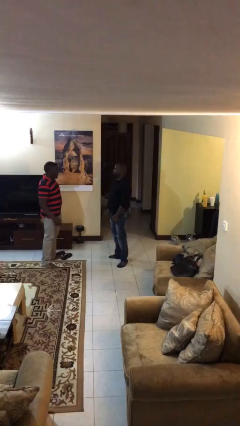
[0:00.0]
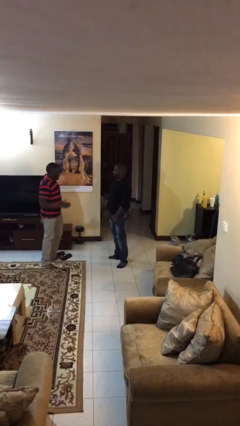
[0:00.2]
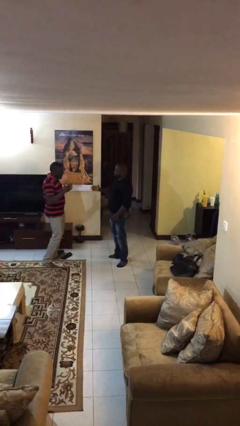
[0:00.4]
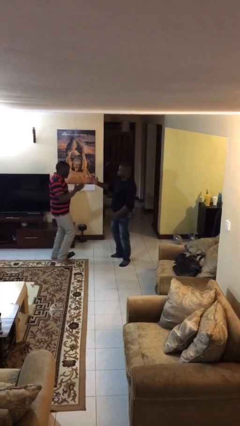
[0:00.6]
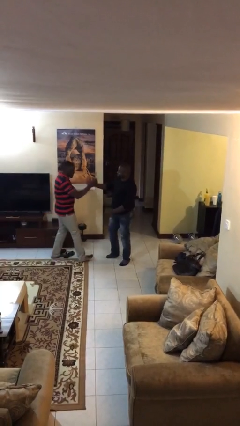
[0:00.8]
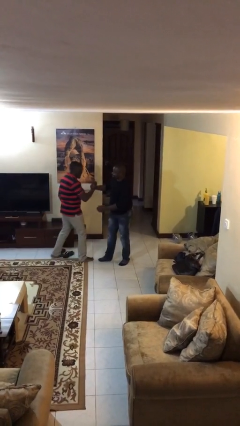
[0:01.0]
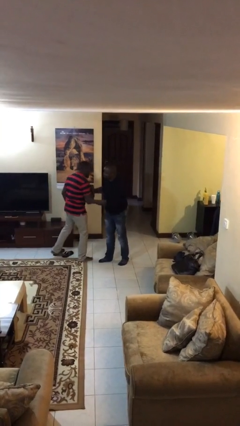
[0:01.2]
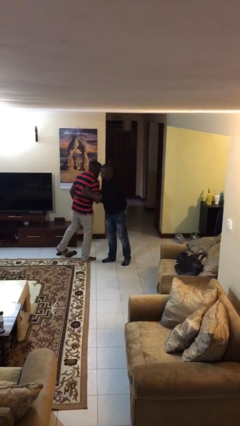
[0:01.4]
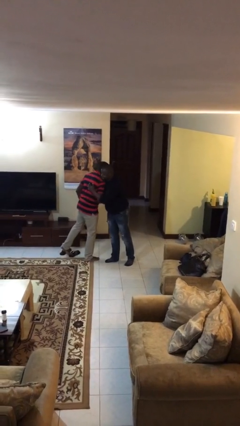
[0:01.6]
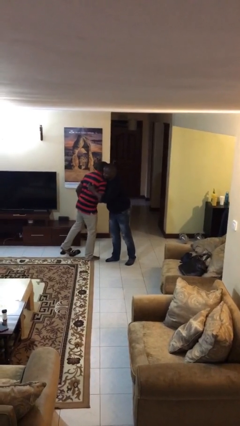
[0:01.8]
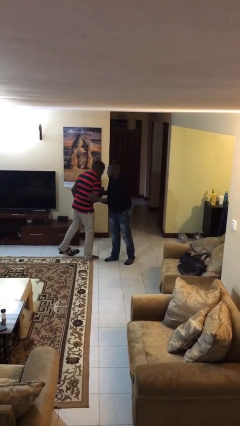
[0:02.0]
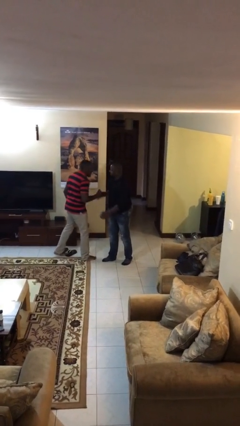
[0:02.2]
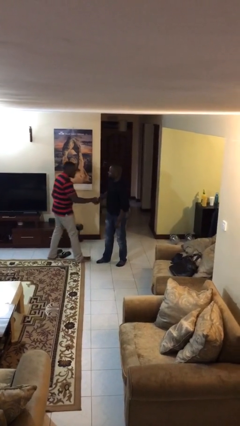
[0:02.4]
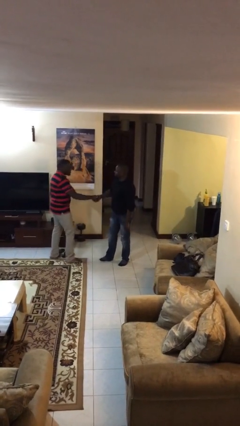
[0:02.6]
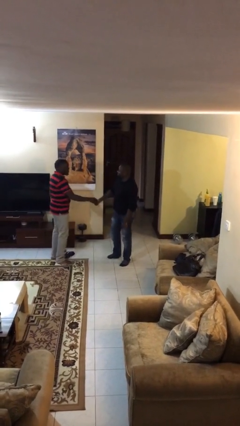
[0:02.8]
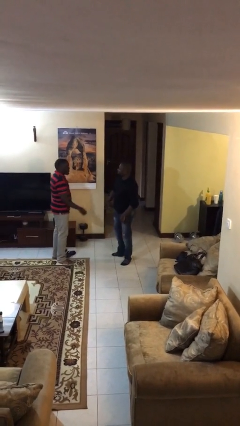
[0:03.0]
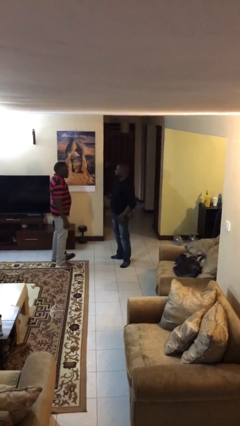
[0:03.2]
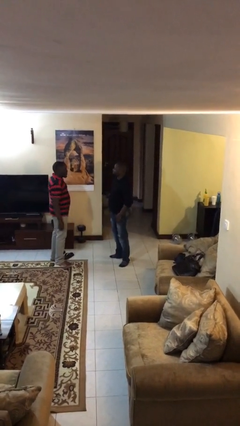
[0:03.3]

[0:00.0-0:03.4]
person embraces person

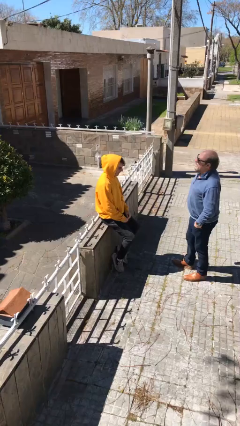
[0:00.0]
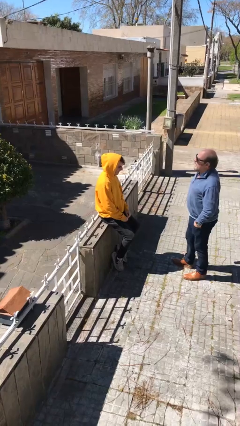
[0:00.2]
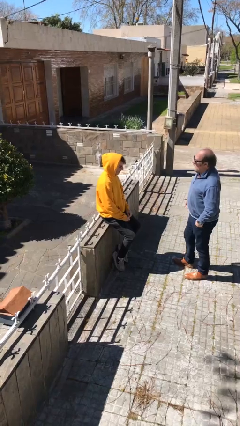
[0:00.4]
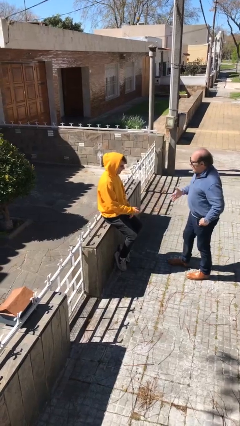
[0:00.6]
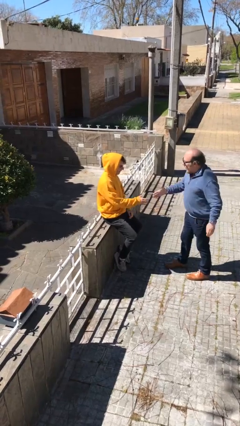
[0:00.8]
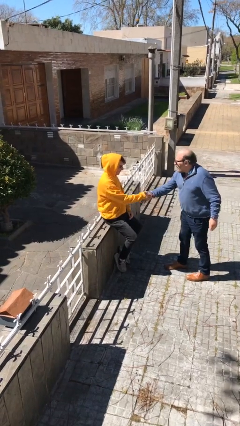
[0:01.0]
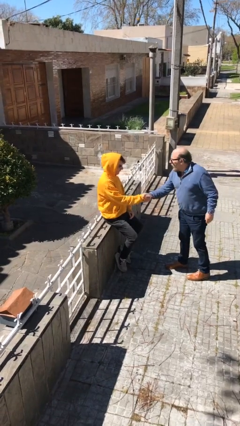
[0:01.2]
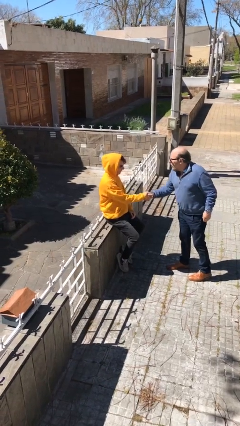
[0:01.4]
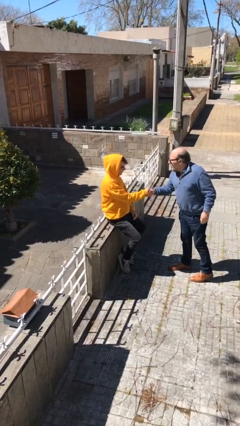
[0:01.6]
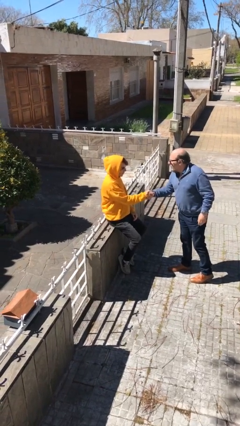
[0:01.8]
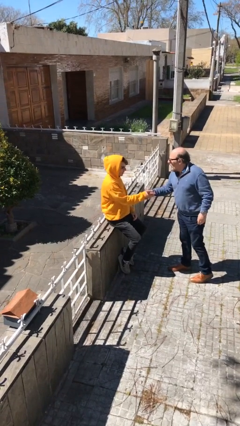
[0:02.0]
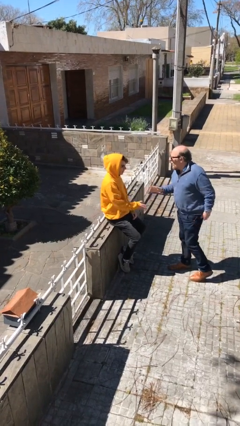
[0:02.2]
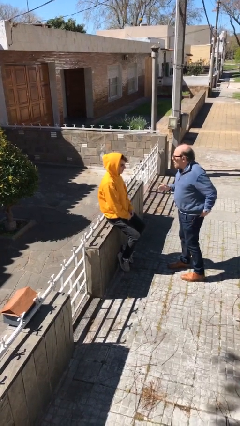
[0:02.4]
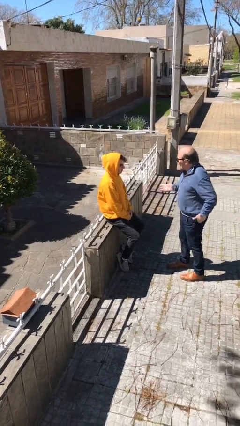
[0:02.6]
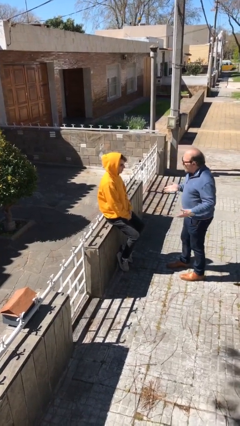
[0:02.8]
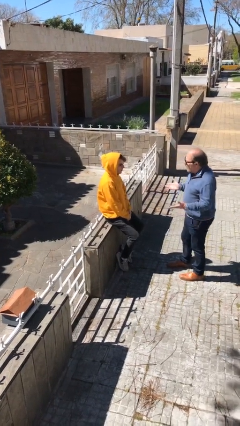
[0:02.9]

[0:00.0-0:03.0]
person shakes hand

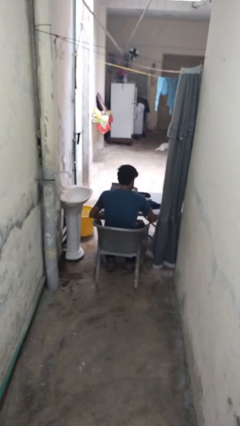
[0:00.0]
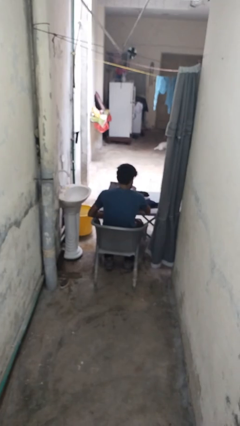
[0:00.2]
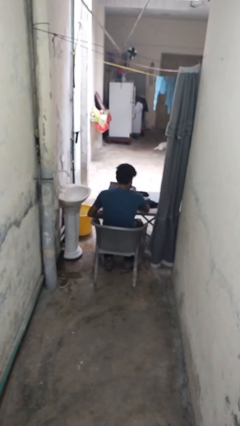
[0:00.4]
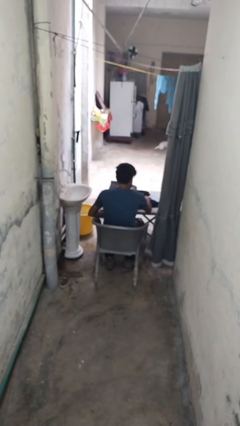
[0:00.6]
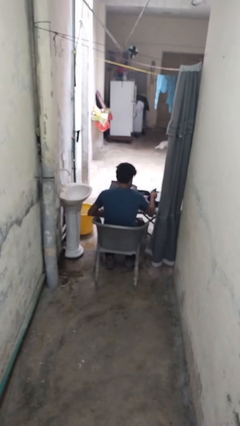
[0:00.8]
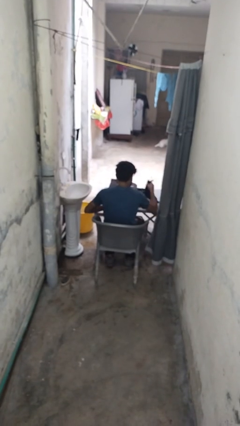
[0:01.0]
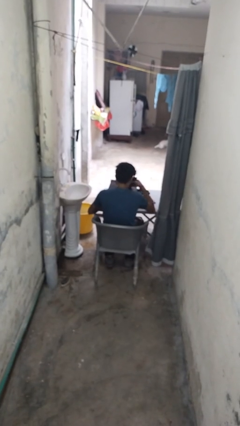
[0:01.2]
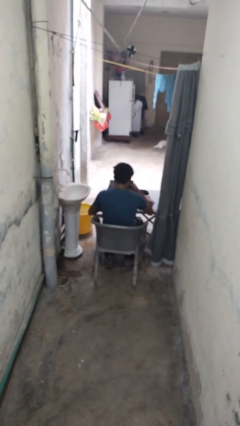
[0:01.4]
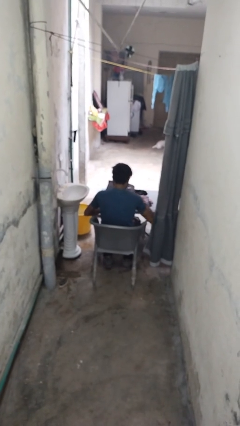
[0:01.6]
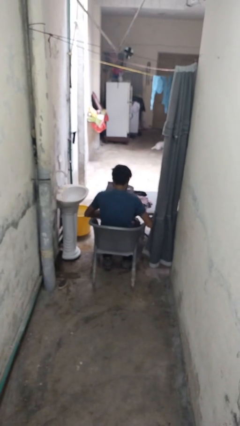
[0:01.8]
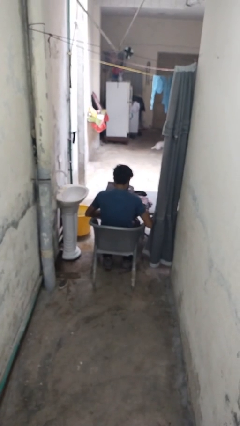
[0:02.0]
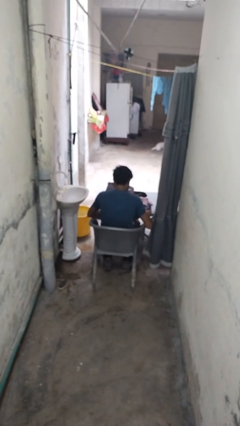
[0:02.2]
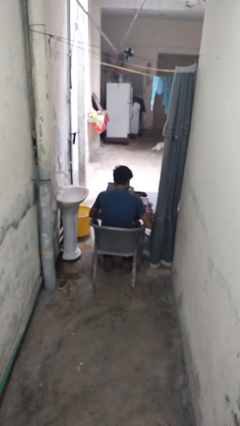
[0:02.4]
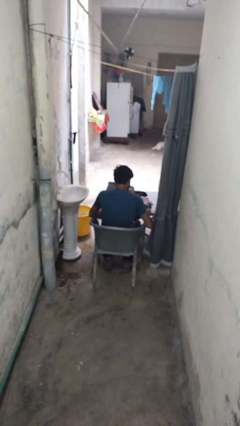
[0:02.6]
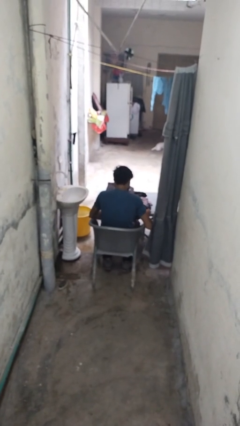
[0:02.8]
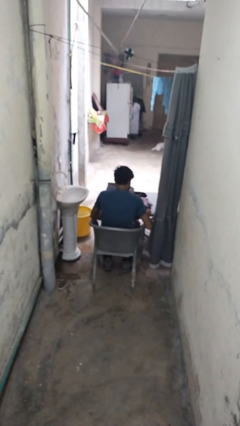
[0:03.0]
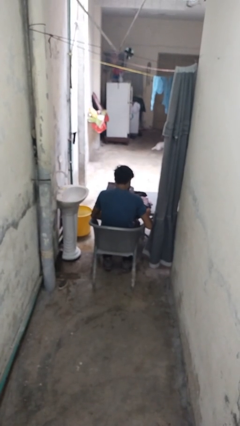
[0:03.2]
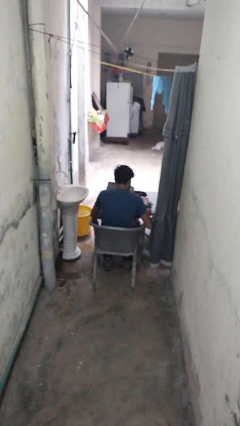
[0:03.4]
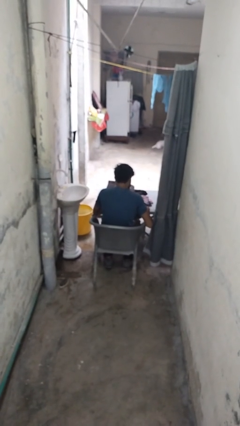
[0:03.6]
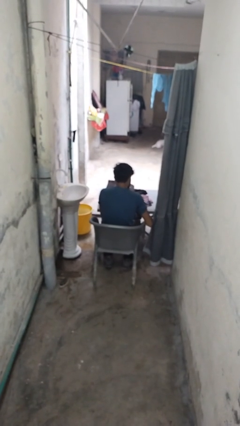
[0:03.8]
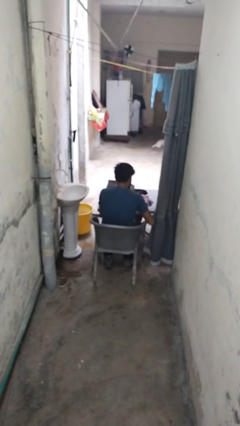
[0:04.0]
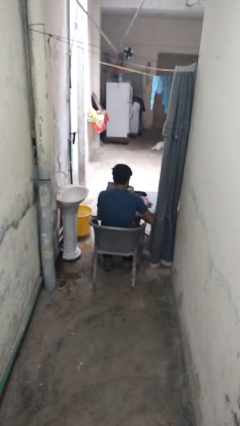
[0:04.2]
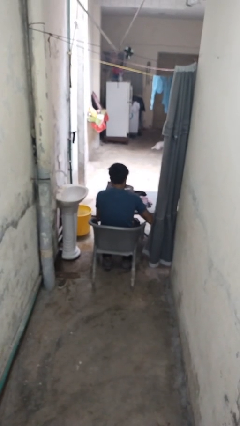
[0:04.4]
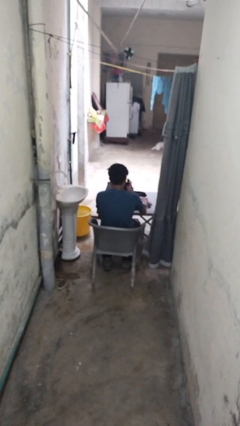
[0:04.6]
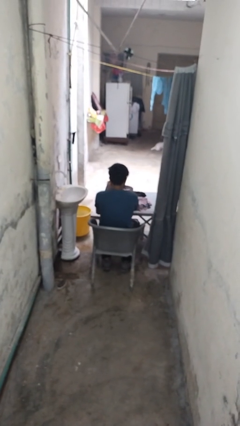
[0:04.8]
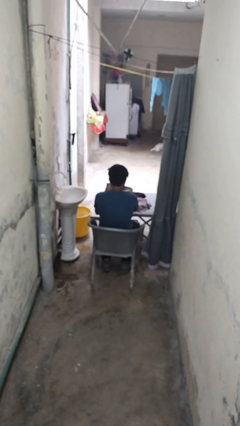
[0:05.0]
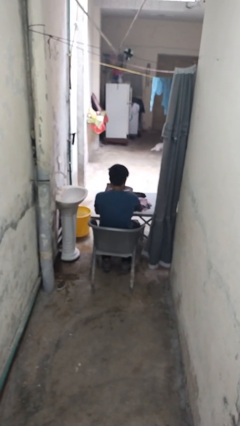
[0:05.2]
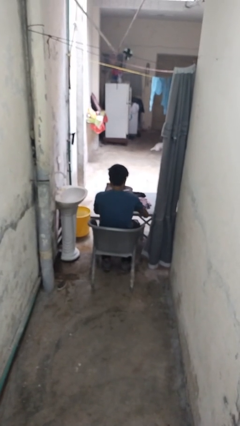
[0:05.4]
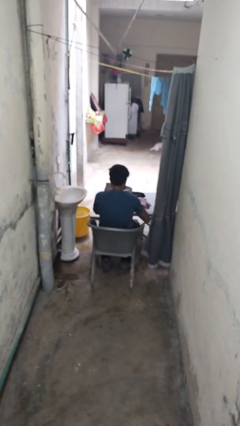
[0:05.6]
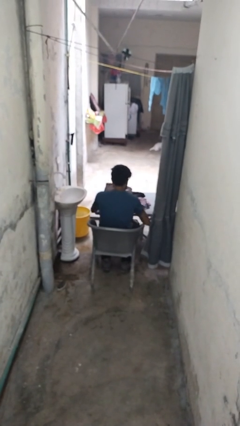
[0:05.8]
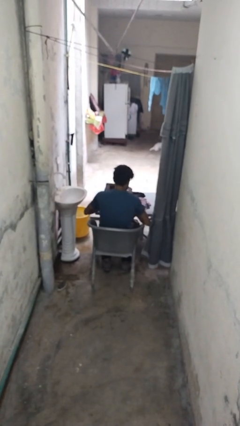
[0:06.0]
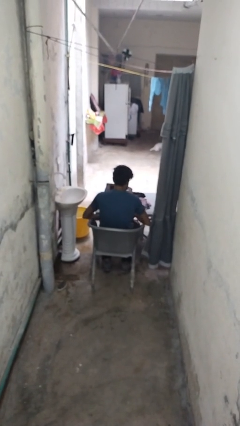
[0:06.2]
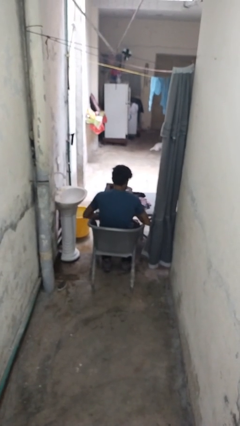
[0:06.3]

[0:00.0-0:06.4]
person folds socks

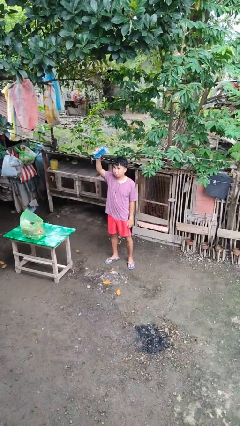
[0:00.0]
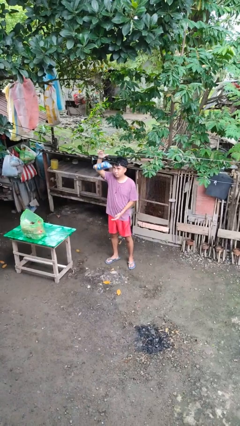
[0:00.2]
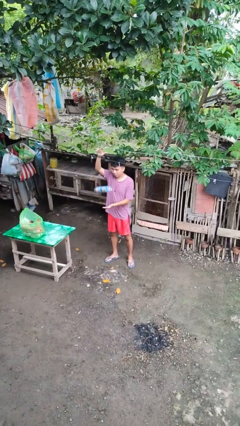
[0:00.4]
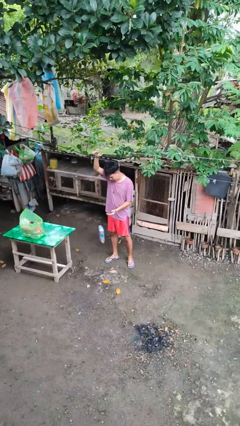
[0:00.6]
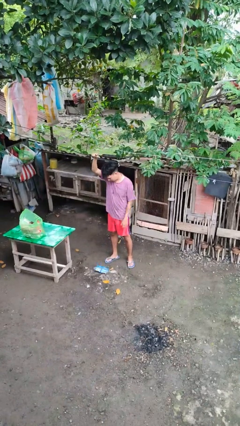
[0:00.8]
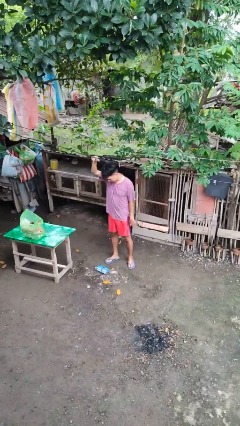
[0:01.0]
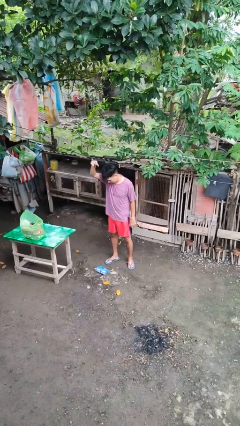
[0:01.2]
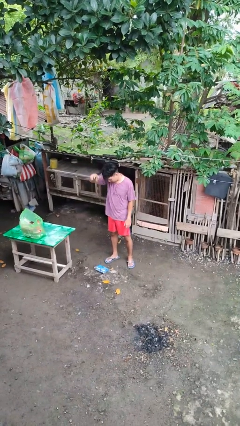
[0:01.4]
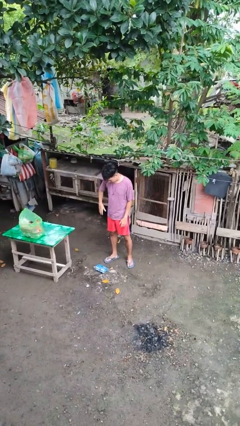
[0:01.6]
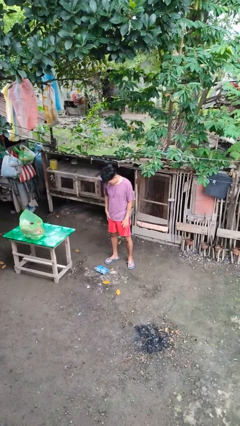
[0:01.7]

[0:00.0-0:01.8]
person drops object

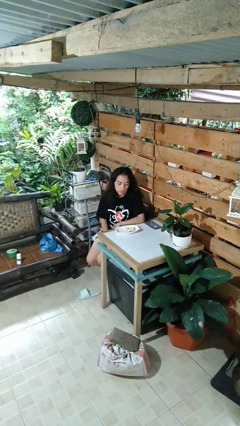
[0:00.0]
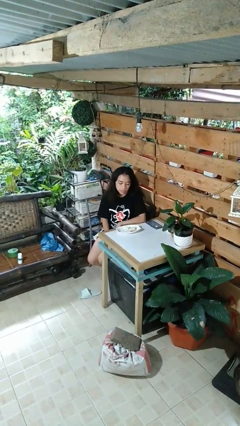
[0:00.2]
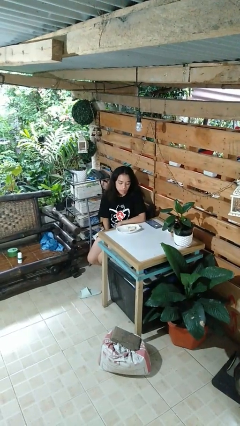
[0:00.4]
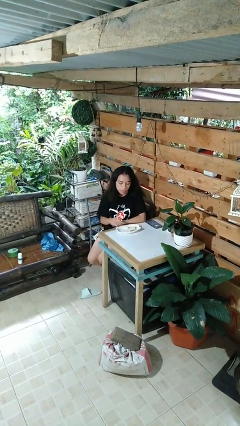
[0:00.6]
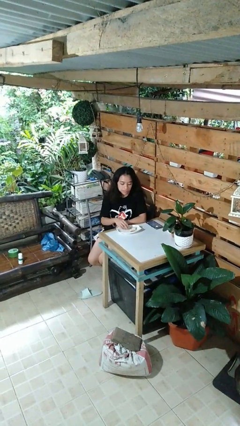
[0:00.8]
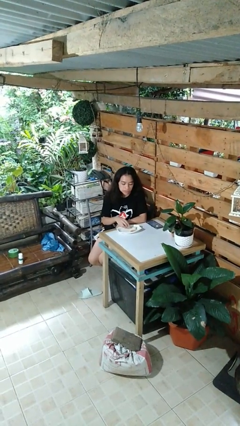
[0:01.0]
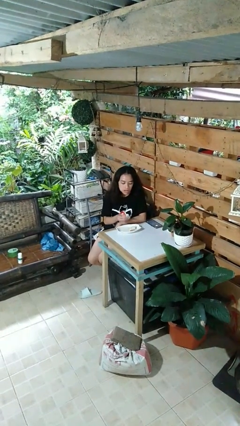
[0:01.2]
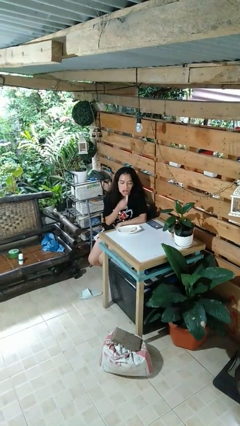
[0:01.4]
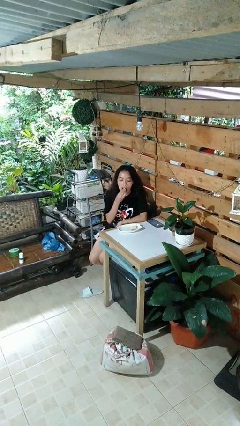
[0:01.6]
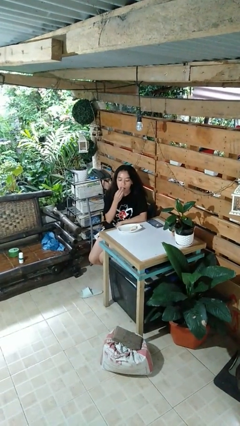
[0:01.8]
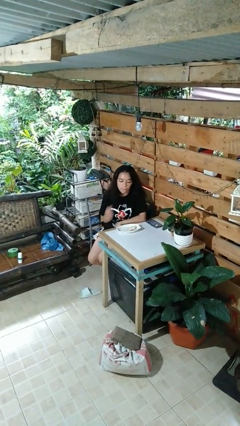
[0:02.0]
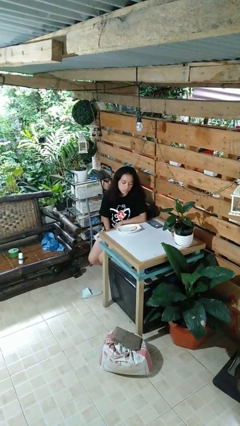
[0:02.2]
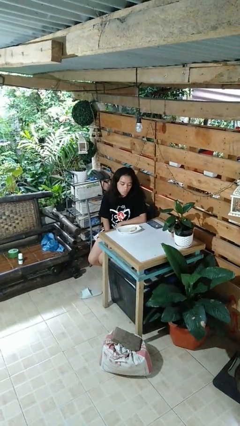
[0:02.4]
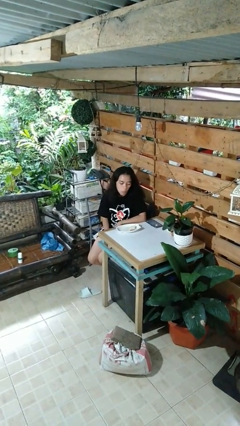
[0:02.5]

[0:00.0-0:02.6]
person eats with hands
